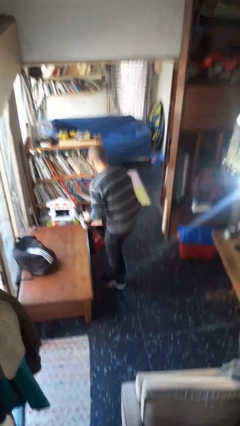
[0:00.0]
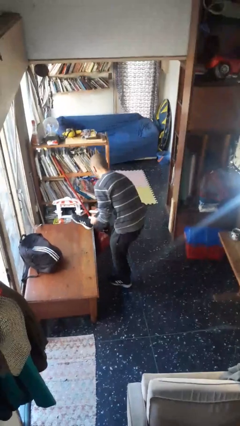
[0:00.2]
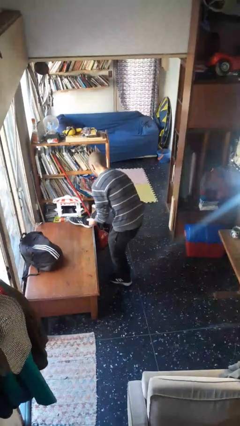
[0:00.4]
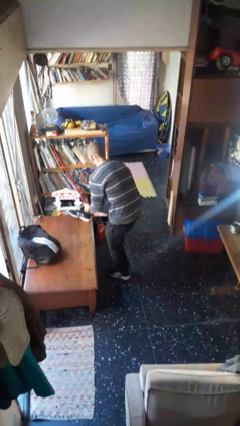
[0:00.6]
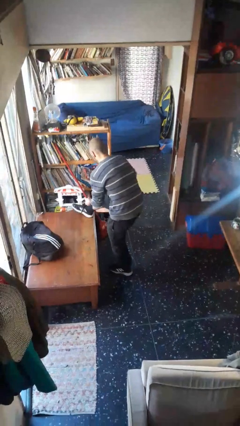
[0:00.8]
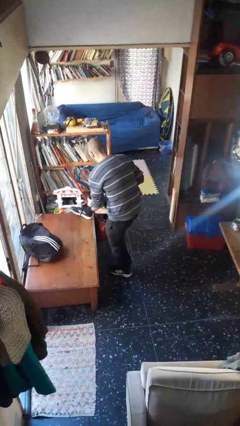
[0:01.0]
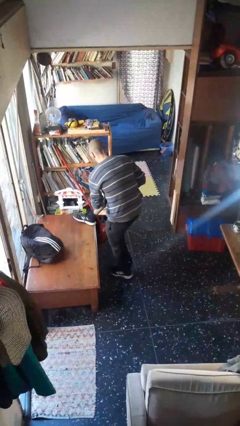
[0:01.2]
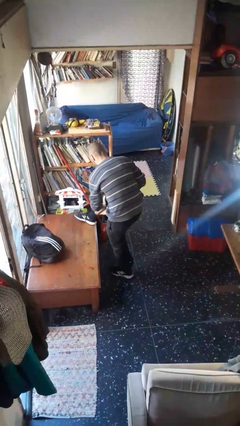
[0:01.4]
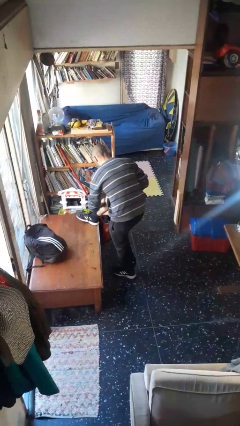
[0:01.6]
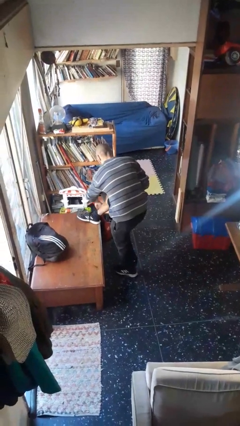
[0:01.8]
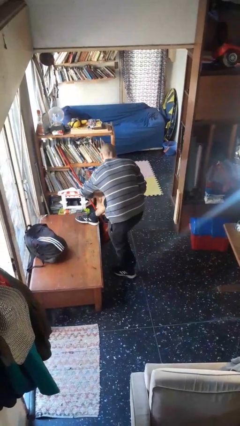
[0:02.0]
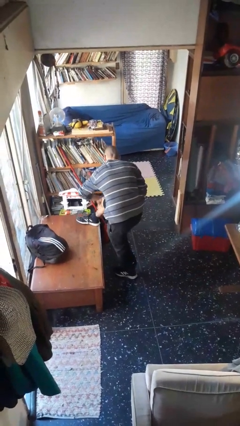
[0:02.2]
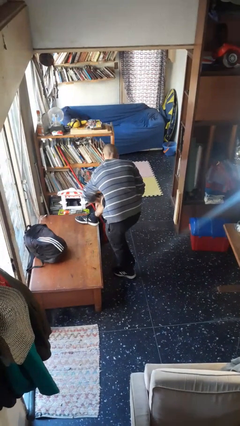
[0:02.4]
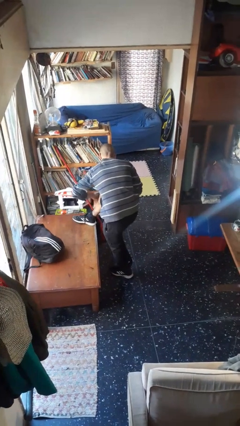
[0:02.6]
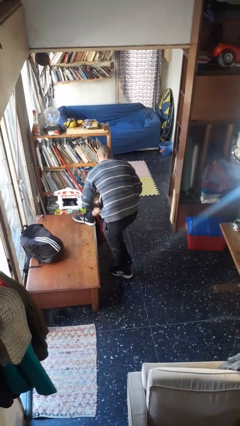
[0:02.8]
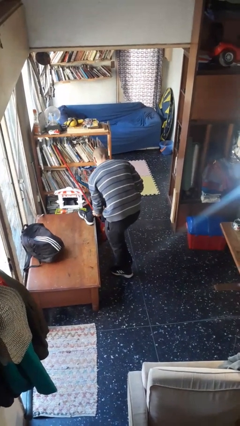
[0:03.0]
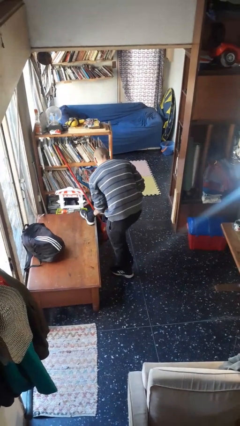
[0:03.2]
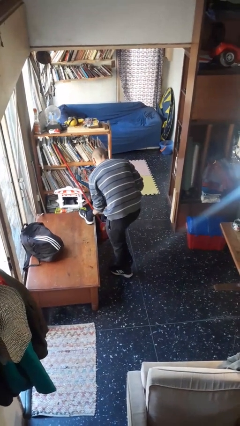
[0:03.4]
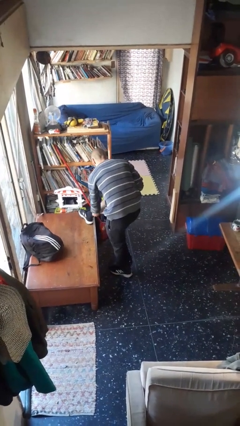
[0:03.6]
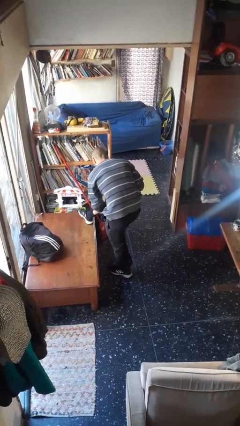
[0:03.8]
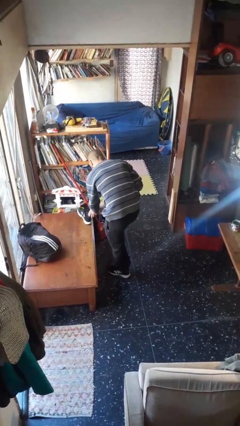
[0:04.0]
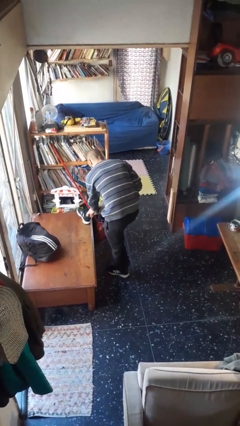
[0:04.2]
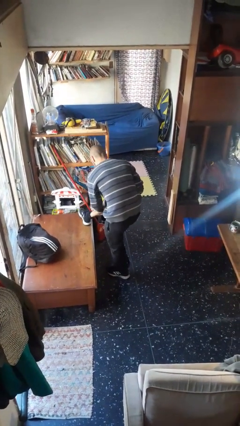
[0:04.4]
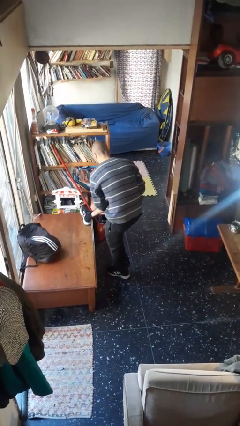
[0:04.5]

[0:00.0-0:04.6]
person applies sunscreen

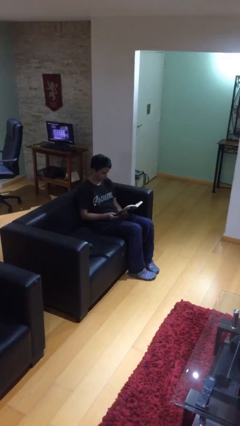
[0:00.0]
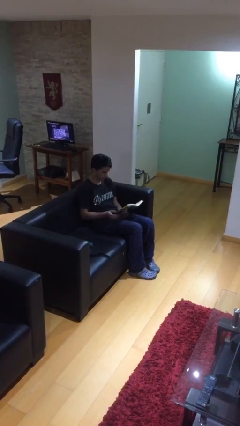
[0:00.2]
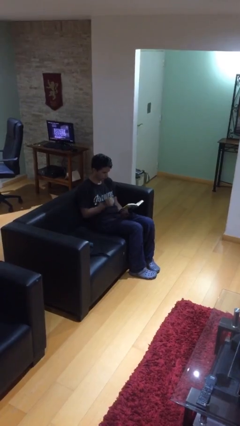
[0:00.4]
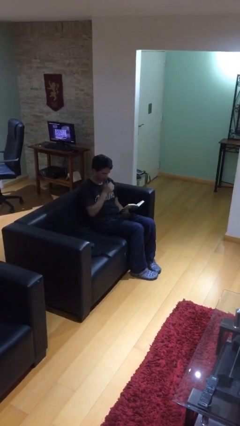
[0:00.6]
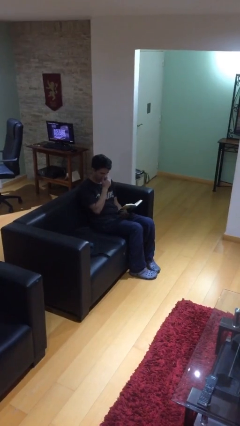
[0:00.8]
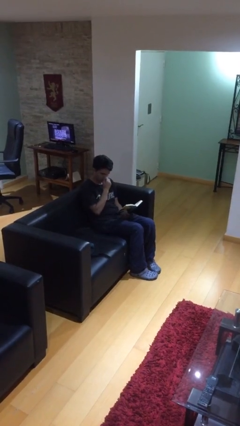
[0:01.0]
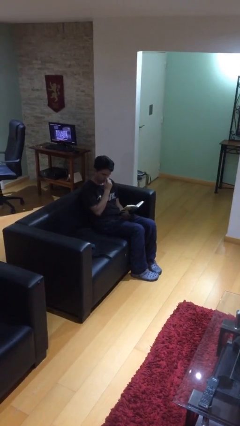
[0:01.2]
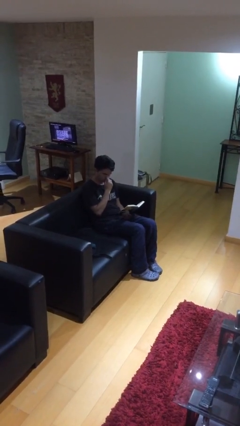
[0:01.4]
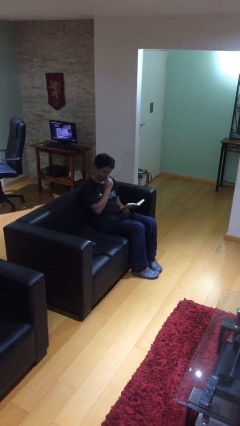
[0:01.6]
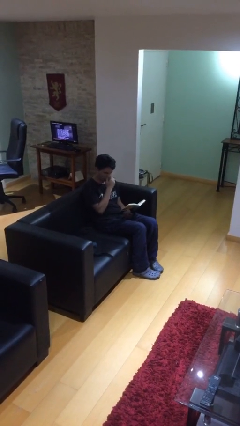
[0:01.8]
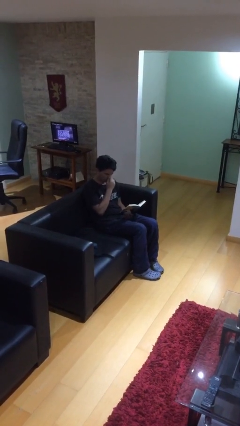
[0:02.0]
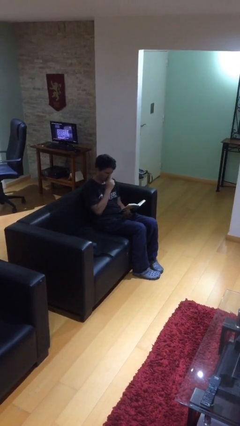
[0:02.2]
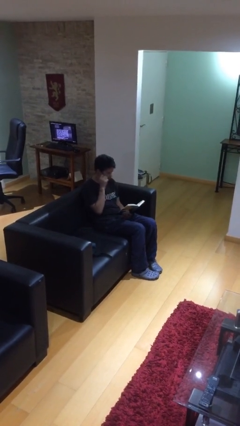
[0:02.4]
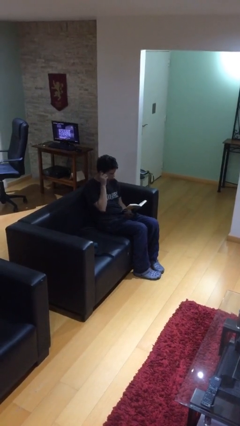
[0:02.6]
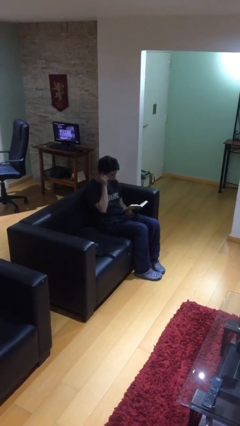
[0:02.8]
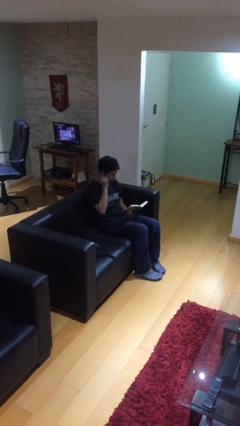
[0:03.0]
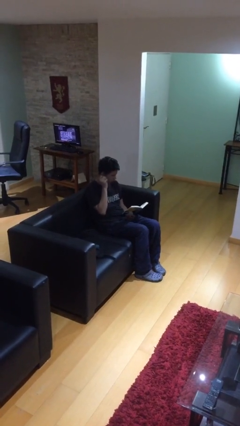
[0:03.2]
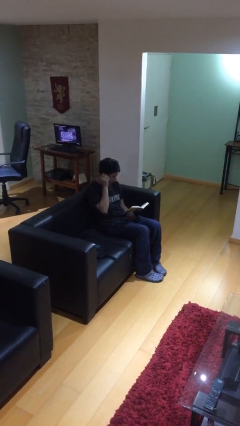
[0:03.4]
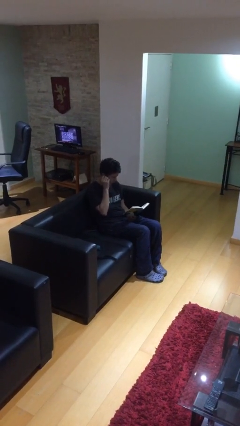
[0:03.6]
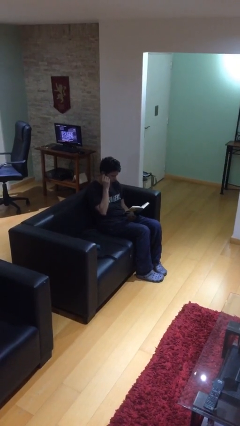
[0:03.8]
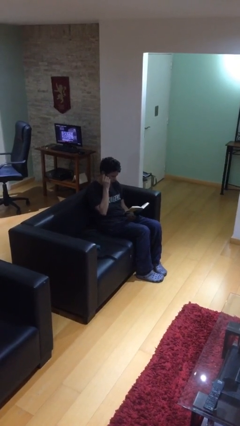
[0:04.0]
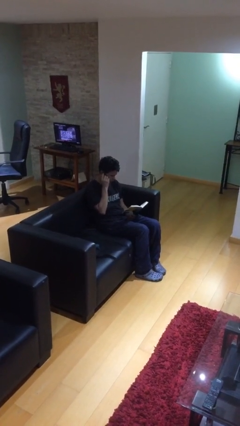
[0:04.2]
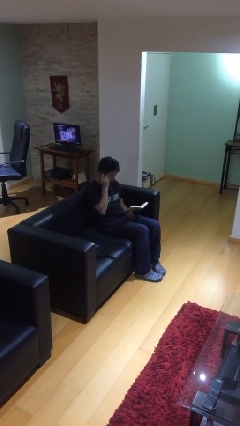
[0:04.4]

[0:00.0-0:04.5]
person reads document

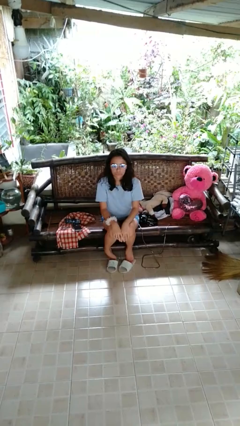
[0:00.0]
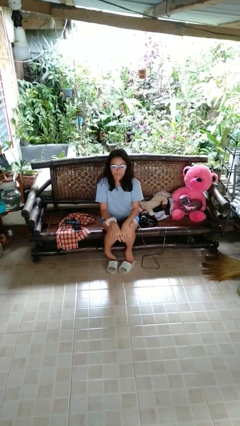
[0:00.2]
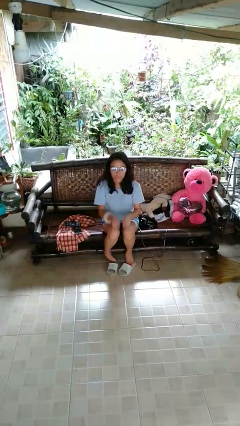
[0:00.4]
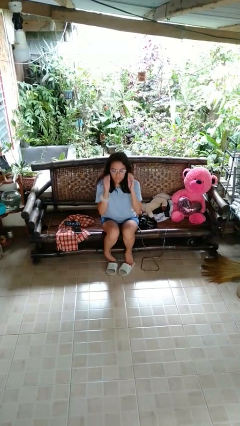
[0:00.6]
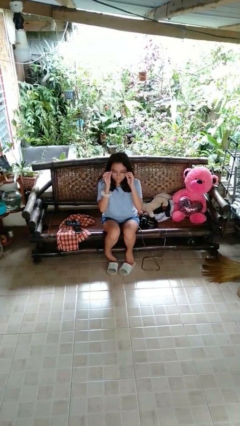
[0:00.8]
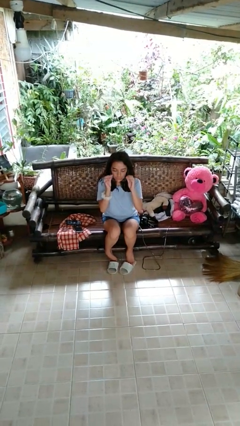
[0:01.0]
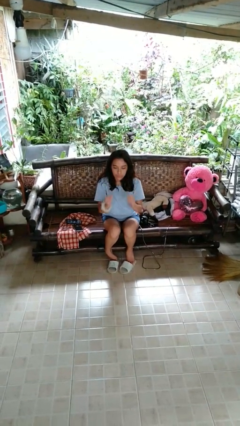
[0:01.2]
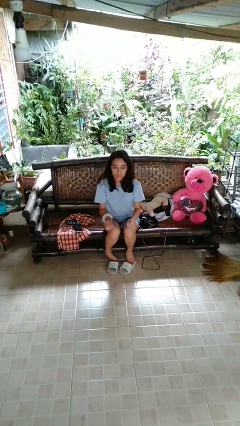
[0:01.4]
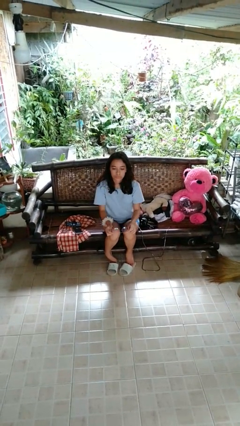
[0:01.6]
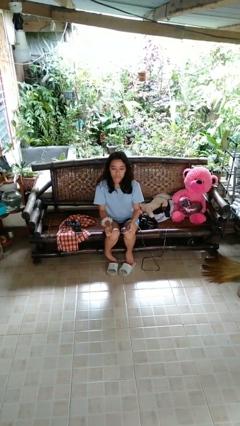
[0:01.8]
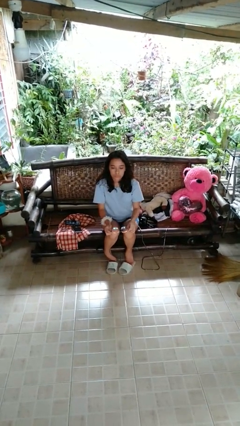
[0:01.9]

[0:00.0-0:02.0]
person grabs person by forearm

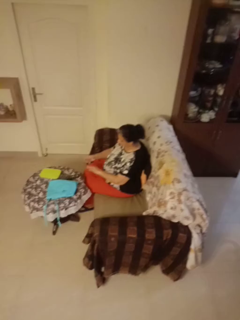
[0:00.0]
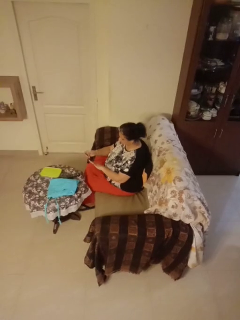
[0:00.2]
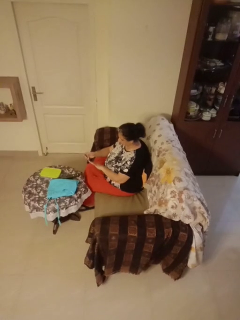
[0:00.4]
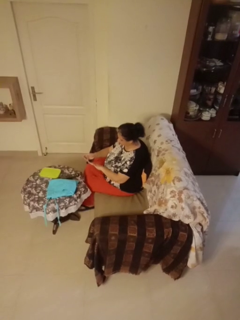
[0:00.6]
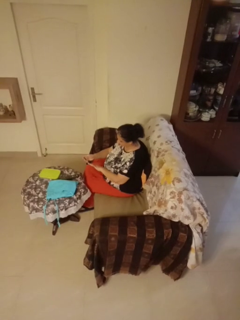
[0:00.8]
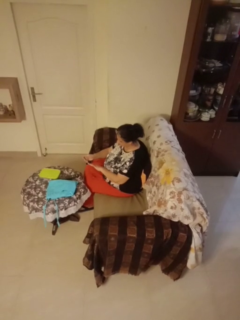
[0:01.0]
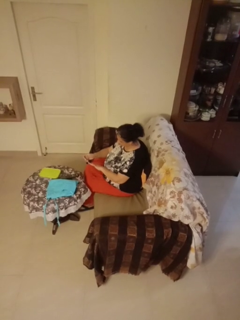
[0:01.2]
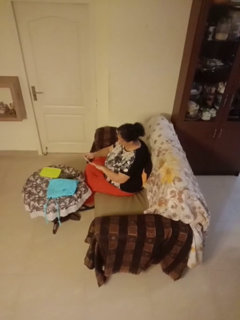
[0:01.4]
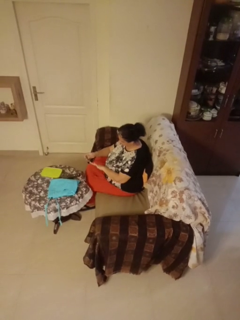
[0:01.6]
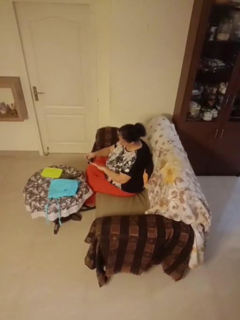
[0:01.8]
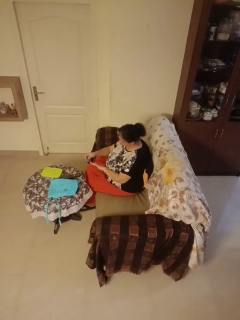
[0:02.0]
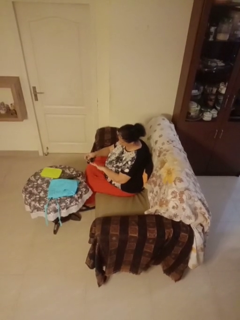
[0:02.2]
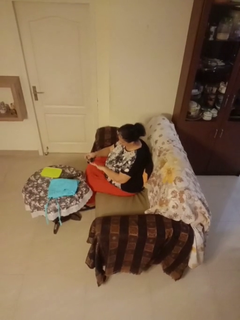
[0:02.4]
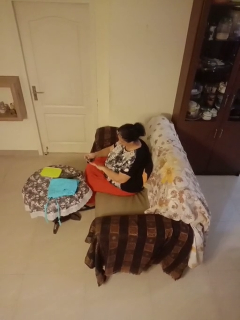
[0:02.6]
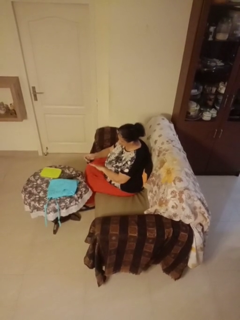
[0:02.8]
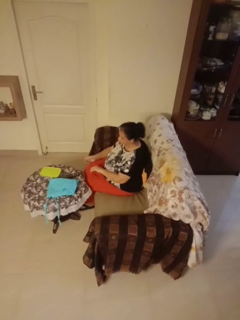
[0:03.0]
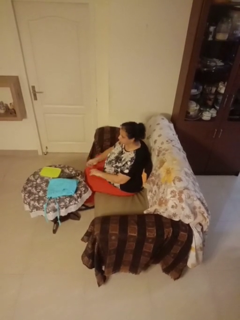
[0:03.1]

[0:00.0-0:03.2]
person clips fingernails

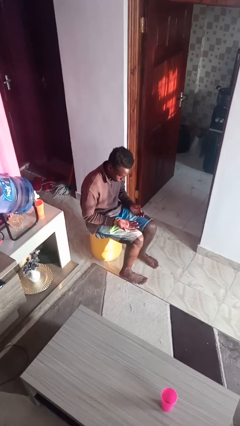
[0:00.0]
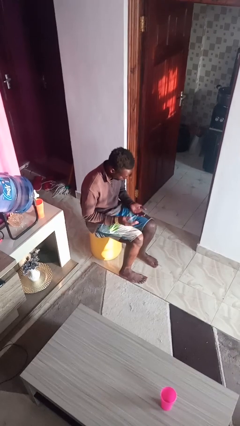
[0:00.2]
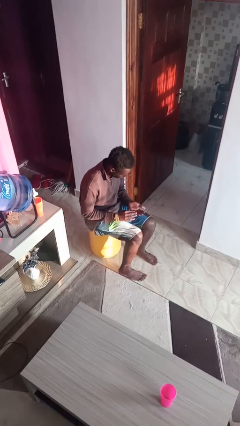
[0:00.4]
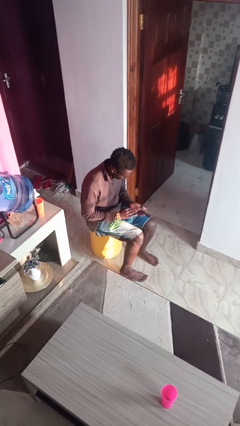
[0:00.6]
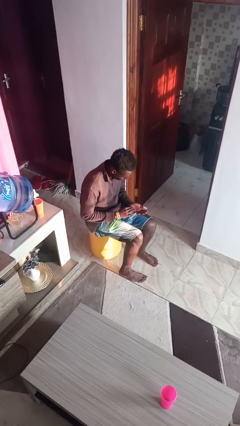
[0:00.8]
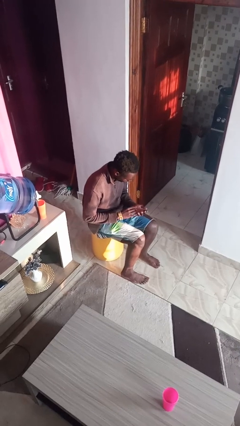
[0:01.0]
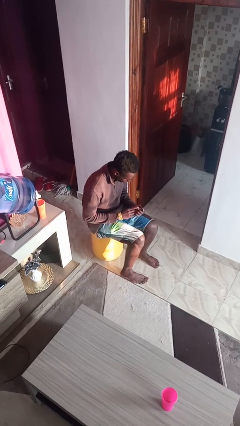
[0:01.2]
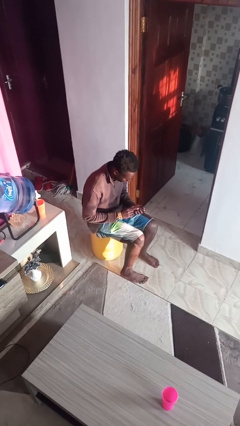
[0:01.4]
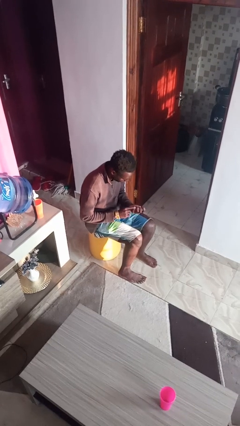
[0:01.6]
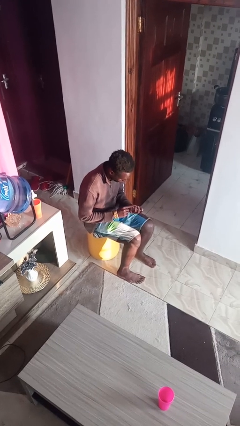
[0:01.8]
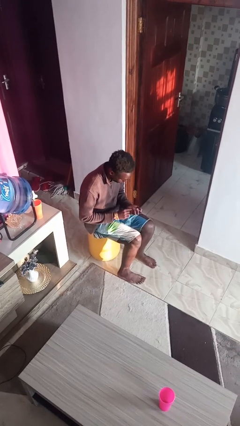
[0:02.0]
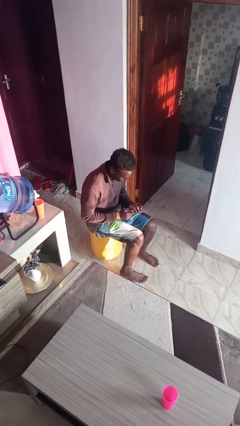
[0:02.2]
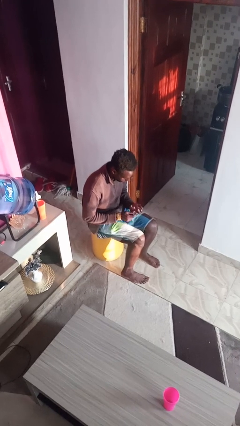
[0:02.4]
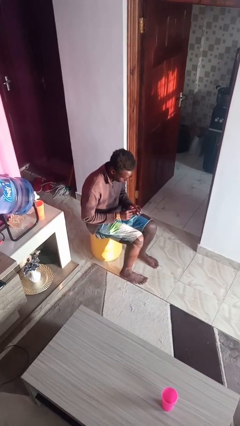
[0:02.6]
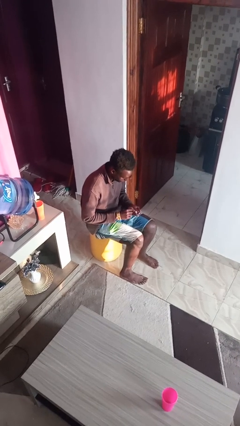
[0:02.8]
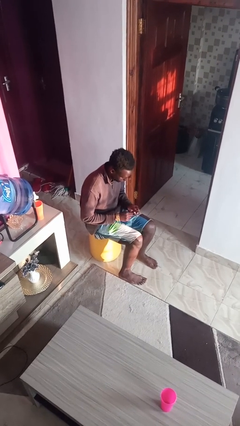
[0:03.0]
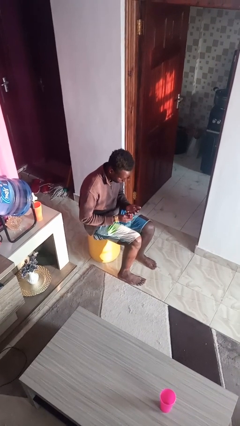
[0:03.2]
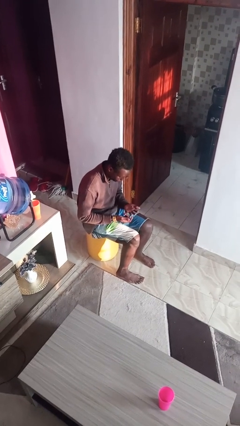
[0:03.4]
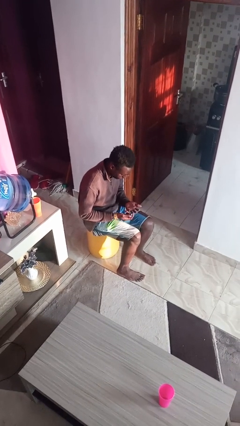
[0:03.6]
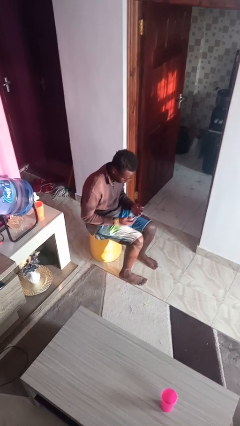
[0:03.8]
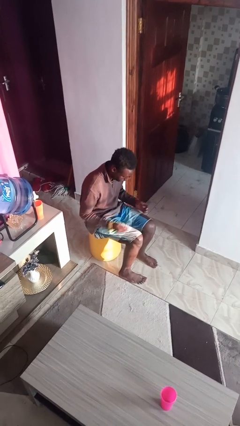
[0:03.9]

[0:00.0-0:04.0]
person looks at hands in lap
